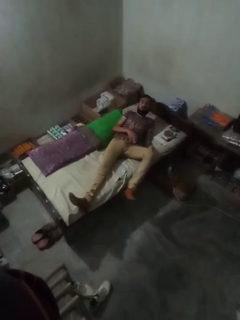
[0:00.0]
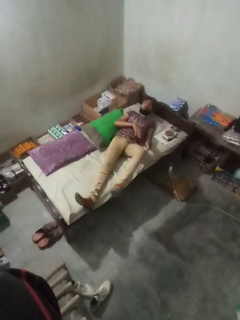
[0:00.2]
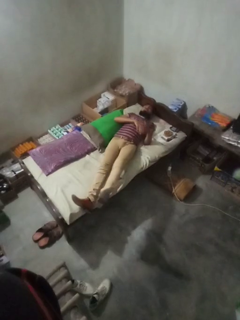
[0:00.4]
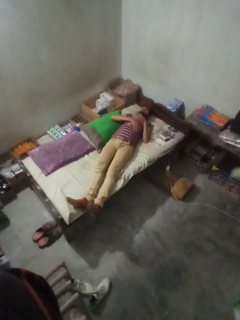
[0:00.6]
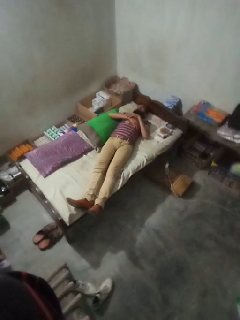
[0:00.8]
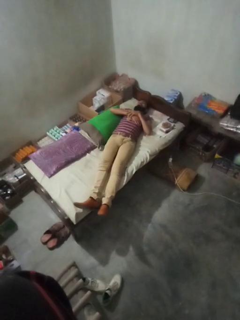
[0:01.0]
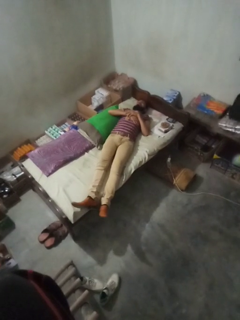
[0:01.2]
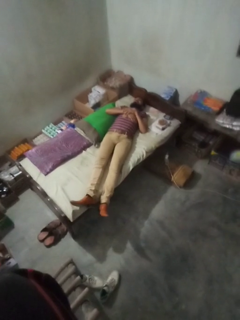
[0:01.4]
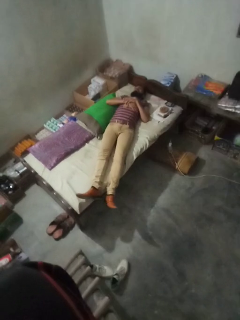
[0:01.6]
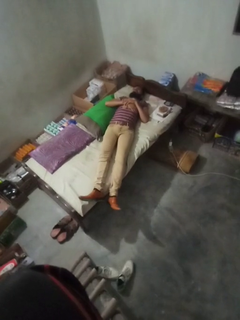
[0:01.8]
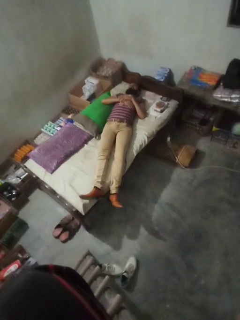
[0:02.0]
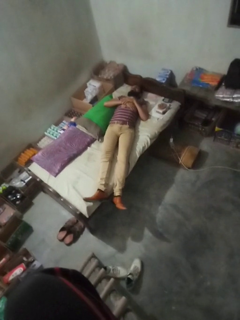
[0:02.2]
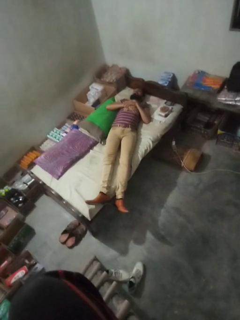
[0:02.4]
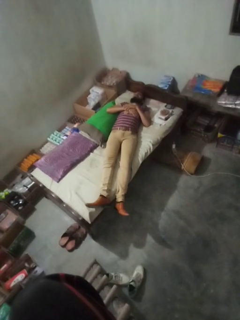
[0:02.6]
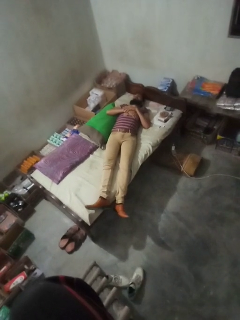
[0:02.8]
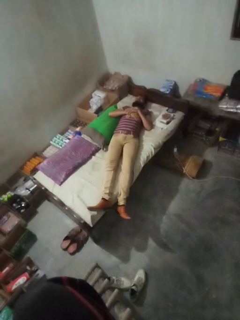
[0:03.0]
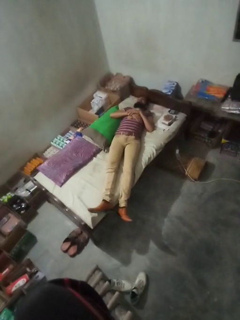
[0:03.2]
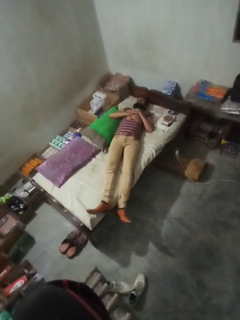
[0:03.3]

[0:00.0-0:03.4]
person lies down on couch

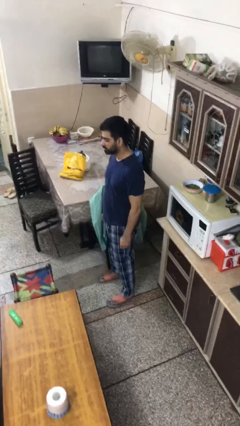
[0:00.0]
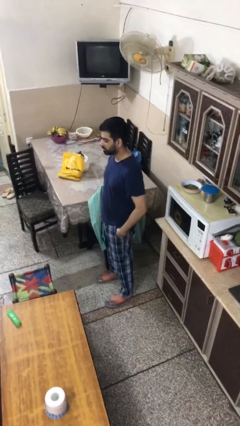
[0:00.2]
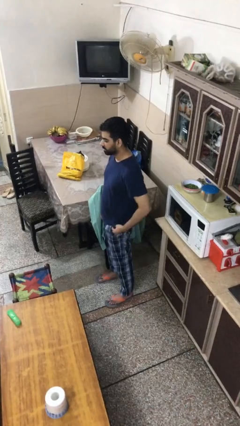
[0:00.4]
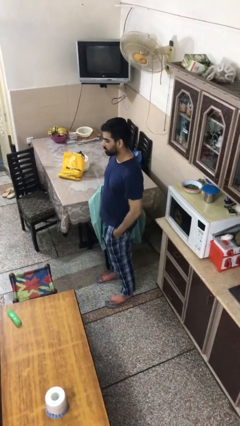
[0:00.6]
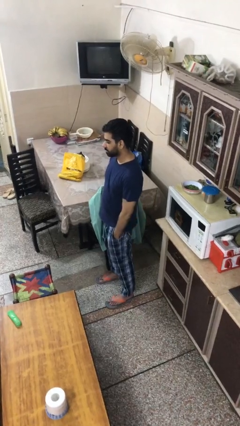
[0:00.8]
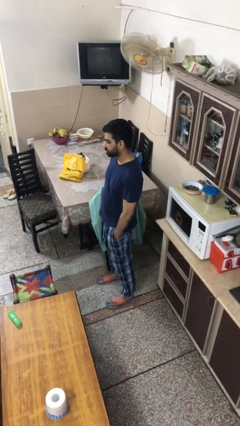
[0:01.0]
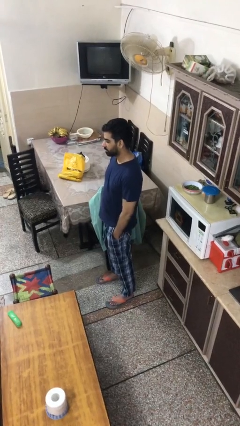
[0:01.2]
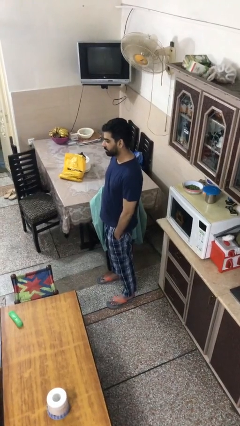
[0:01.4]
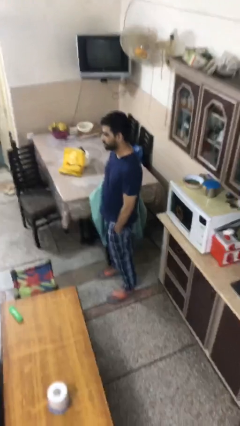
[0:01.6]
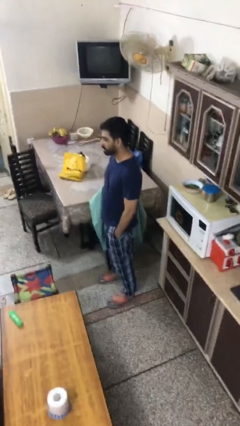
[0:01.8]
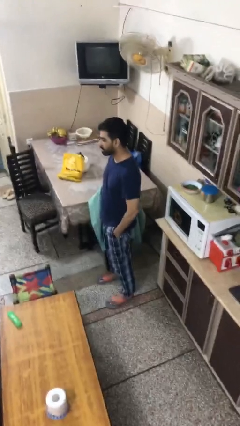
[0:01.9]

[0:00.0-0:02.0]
person puts hands in back pockets

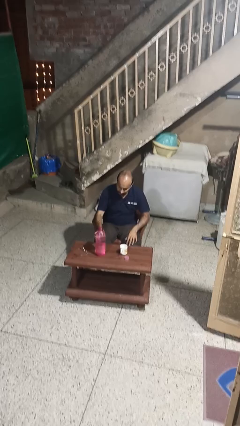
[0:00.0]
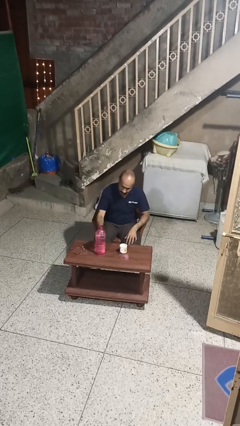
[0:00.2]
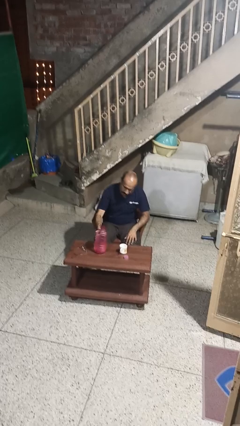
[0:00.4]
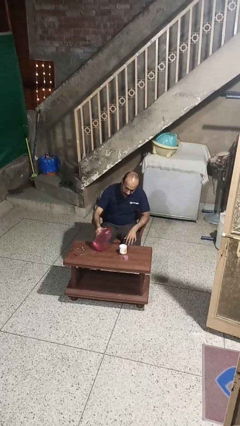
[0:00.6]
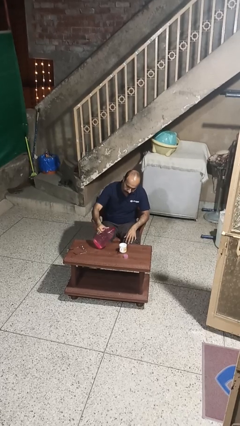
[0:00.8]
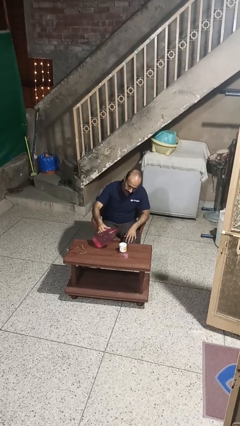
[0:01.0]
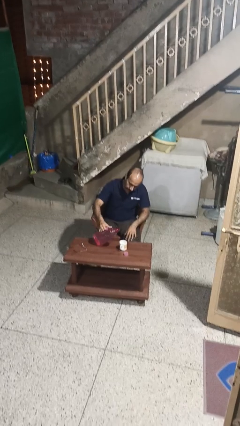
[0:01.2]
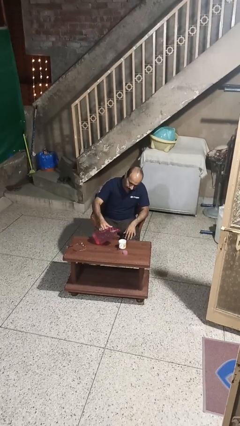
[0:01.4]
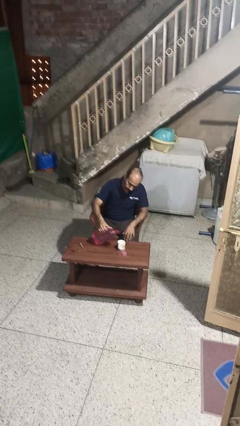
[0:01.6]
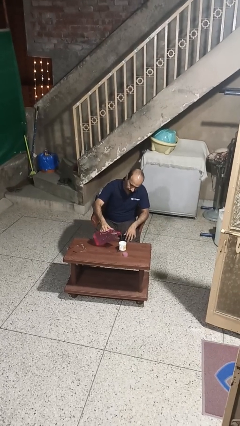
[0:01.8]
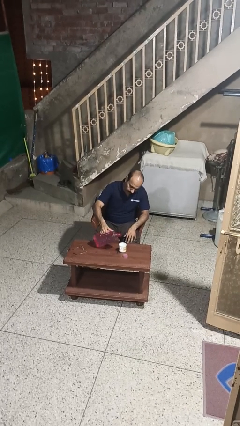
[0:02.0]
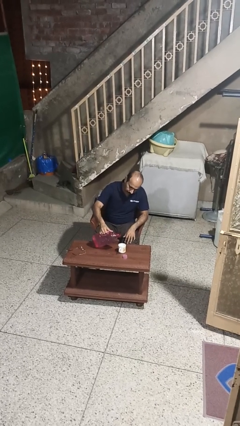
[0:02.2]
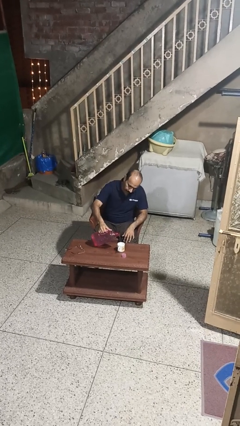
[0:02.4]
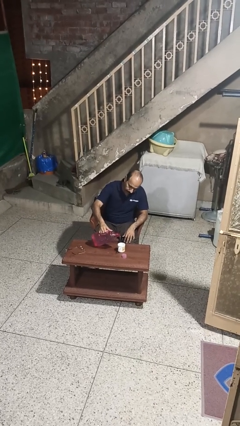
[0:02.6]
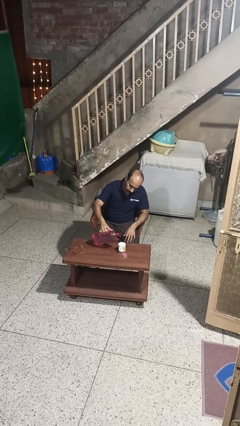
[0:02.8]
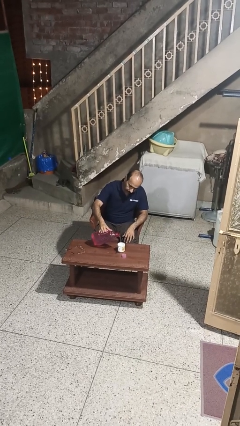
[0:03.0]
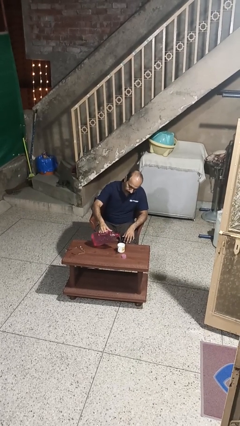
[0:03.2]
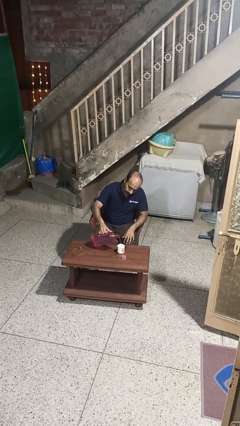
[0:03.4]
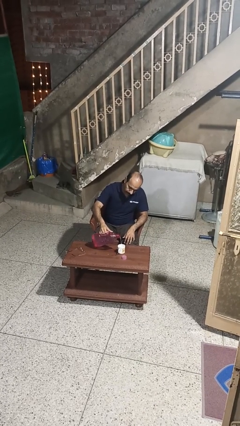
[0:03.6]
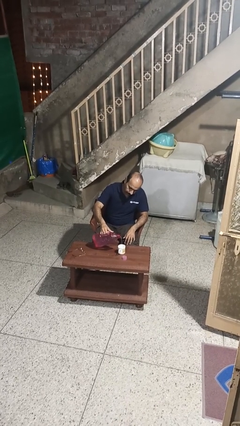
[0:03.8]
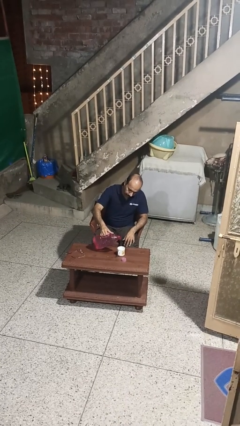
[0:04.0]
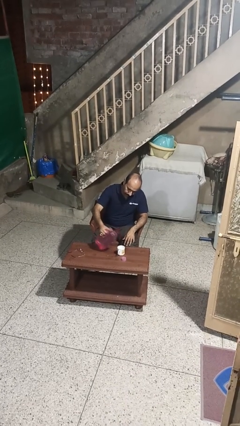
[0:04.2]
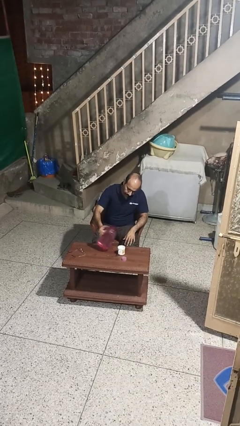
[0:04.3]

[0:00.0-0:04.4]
person pours liquid into cup

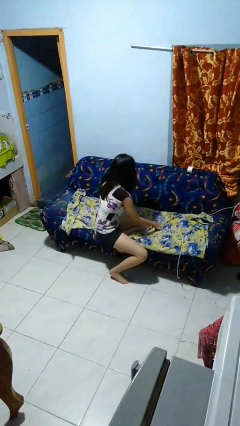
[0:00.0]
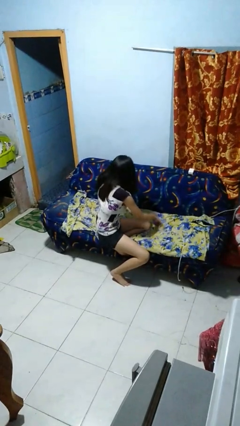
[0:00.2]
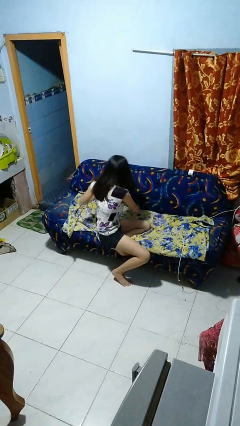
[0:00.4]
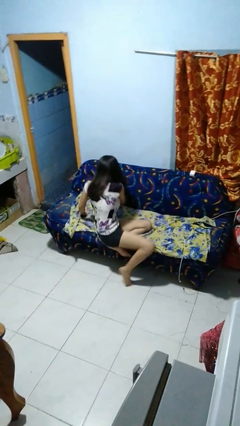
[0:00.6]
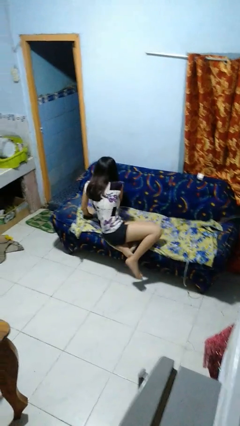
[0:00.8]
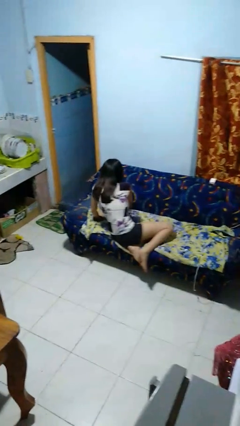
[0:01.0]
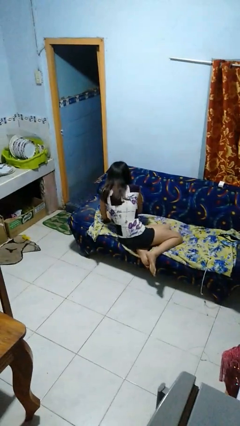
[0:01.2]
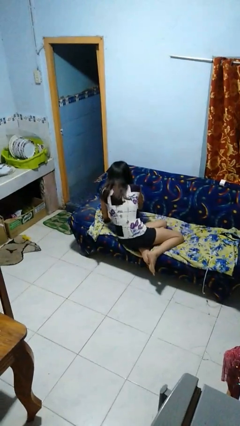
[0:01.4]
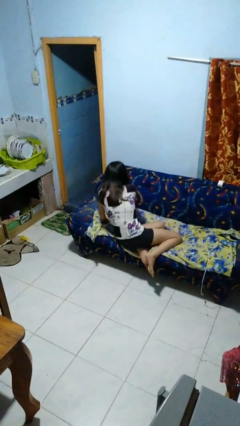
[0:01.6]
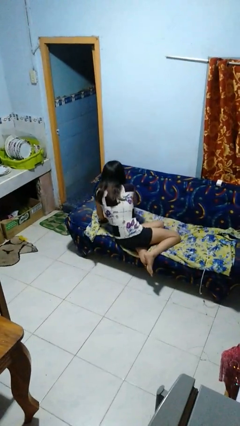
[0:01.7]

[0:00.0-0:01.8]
person searches in couch

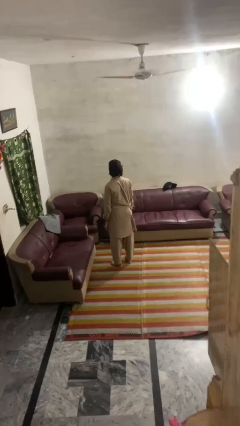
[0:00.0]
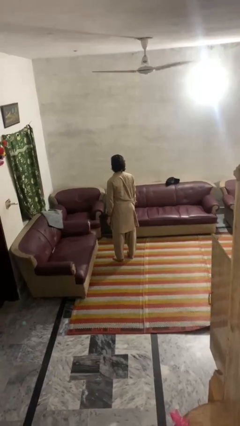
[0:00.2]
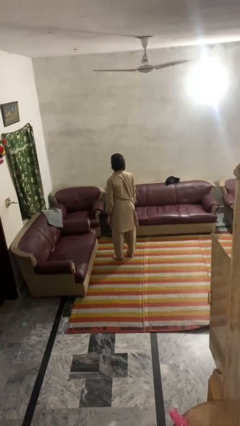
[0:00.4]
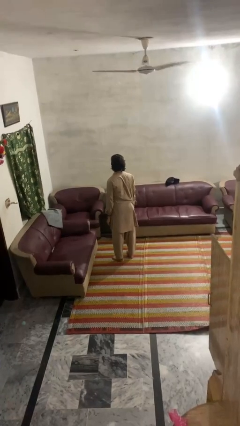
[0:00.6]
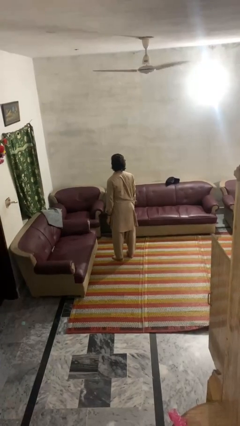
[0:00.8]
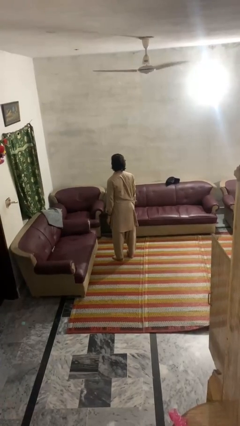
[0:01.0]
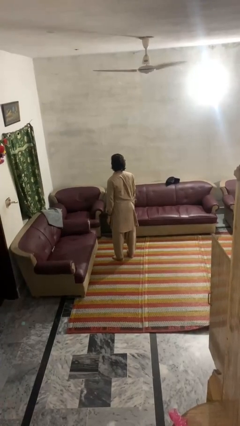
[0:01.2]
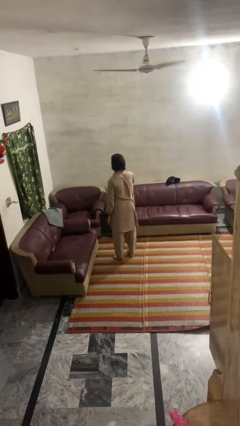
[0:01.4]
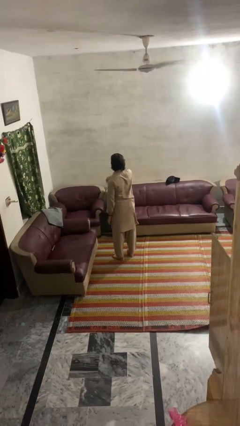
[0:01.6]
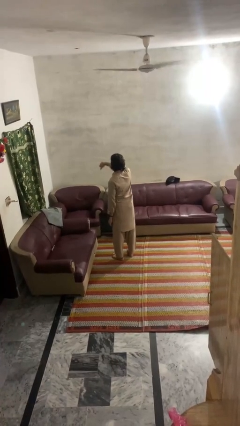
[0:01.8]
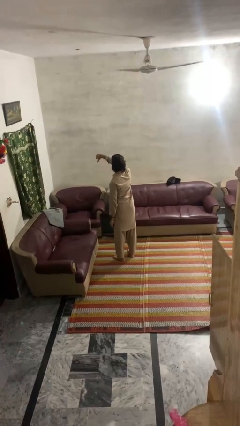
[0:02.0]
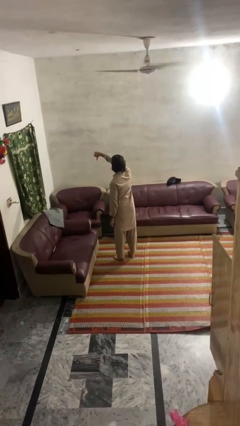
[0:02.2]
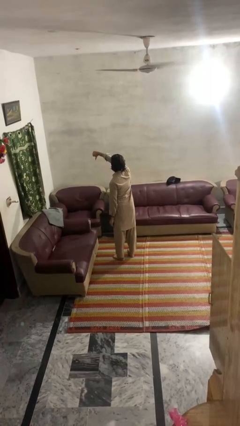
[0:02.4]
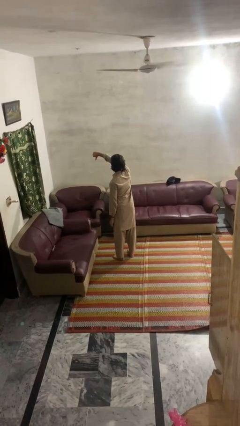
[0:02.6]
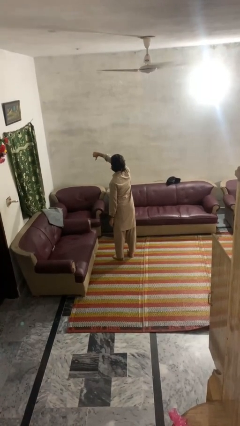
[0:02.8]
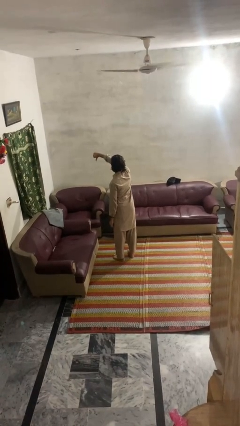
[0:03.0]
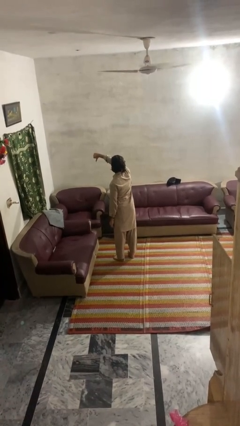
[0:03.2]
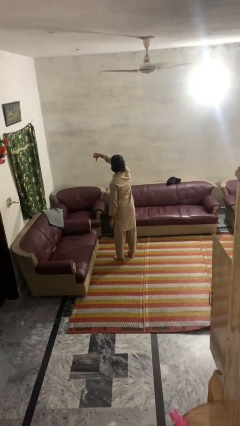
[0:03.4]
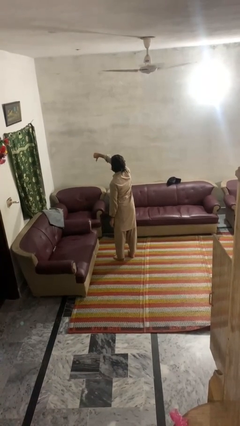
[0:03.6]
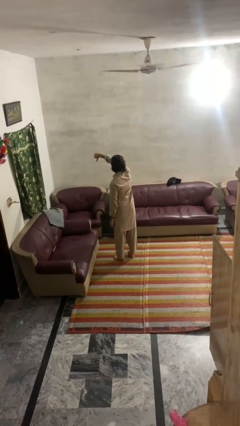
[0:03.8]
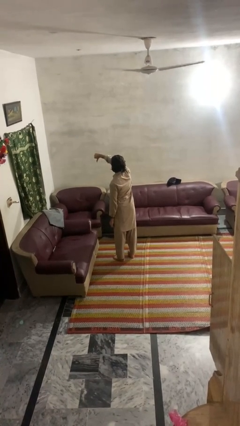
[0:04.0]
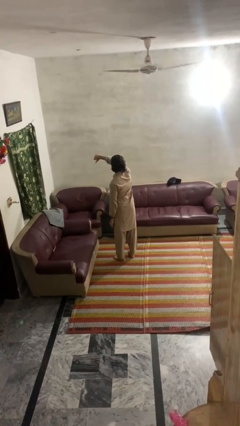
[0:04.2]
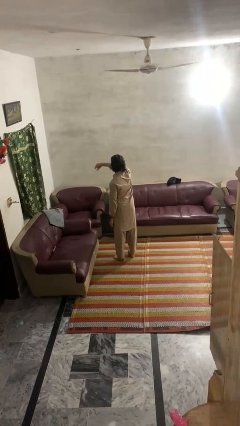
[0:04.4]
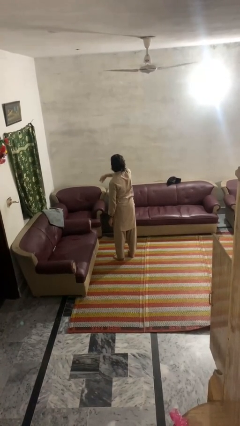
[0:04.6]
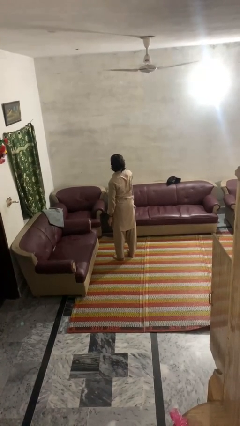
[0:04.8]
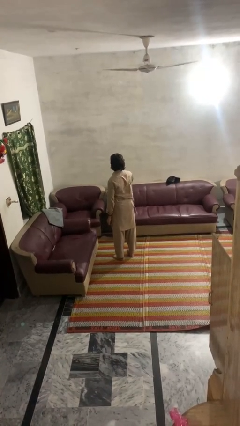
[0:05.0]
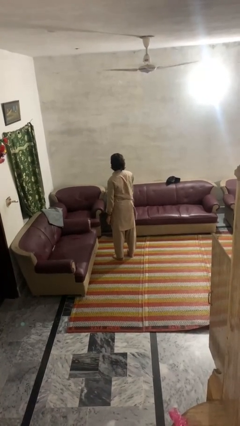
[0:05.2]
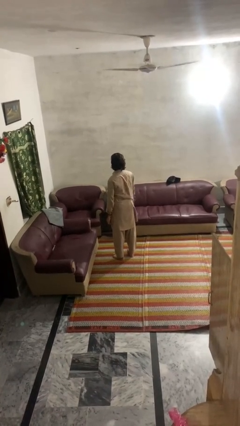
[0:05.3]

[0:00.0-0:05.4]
person gestures thumbs down

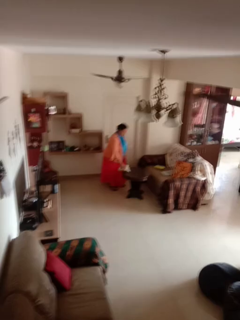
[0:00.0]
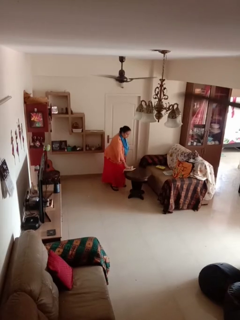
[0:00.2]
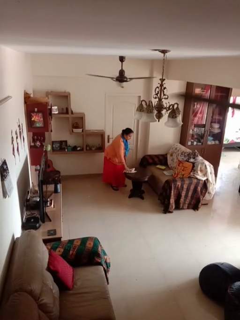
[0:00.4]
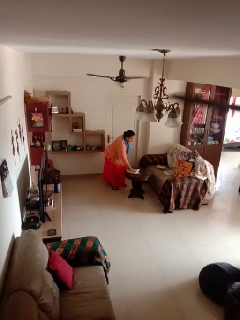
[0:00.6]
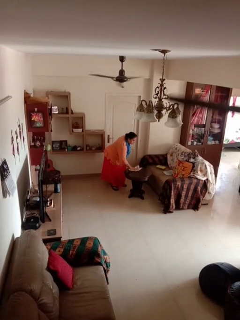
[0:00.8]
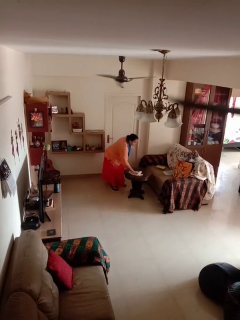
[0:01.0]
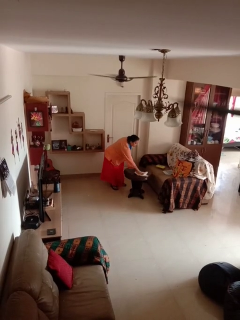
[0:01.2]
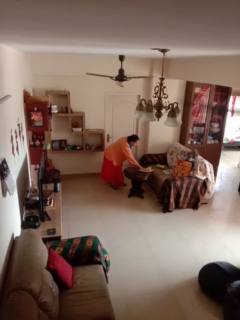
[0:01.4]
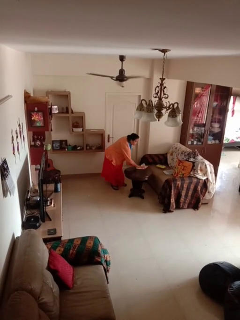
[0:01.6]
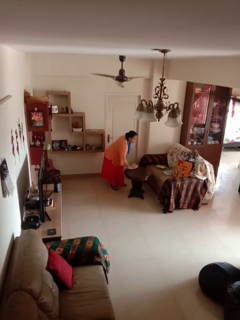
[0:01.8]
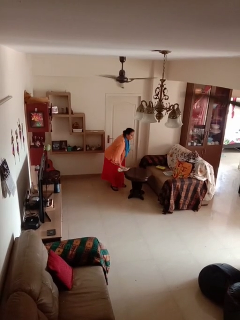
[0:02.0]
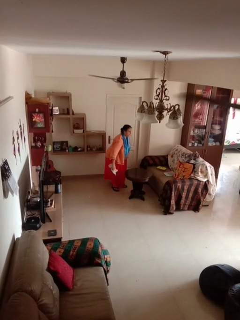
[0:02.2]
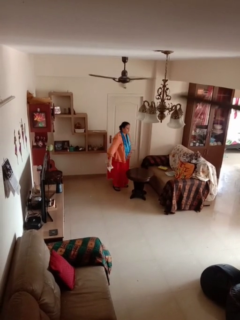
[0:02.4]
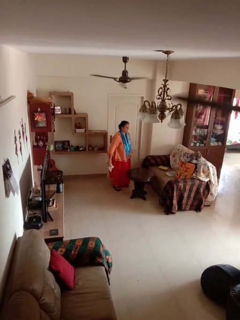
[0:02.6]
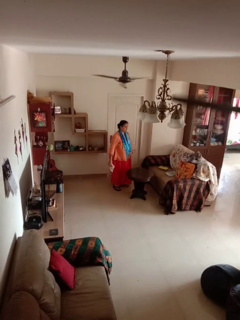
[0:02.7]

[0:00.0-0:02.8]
person cleans table with rag
